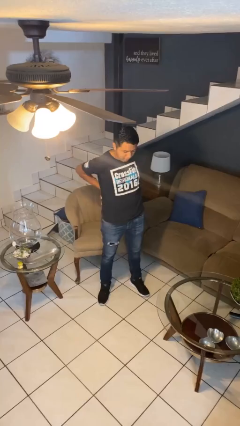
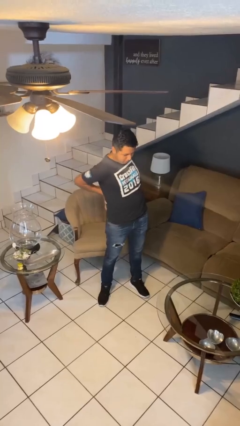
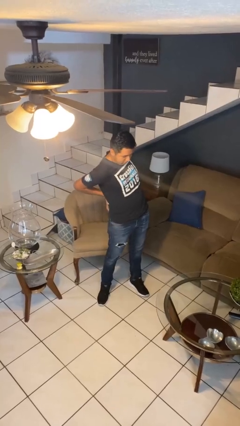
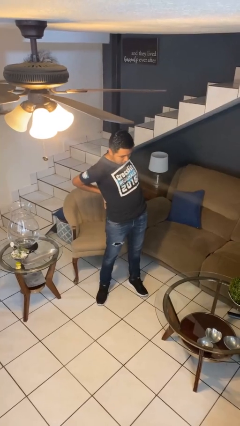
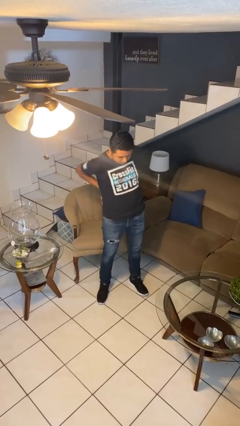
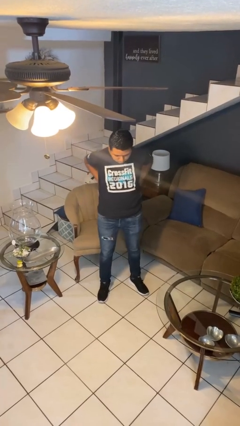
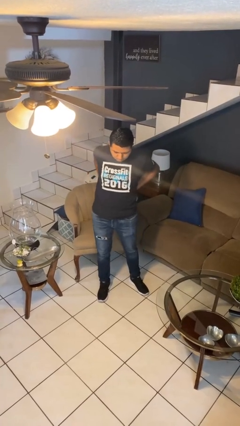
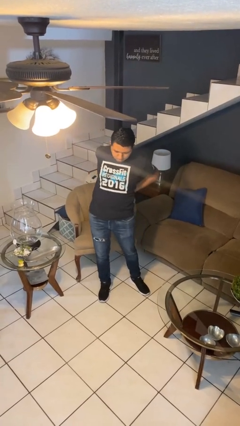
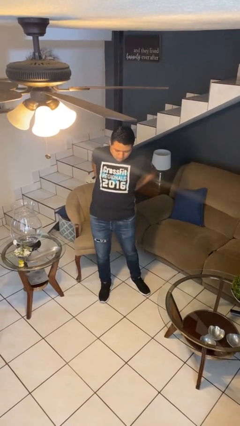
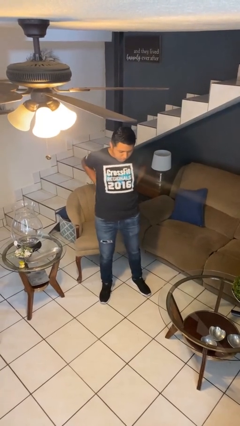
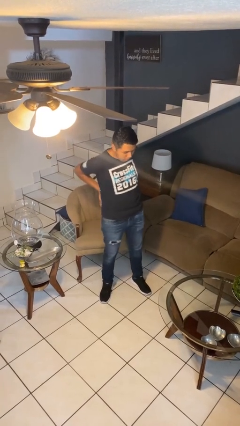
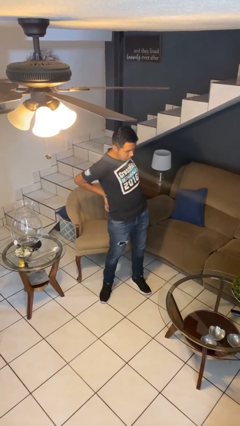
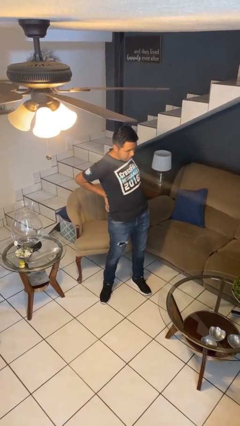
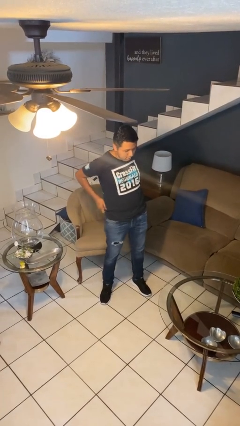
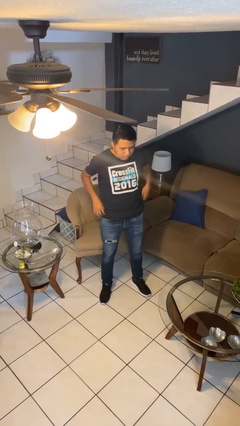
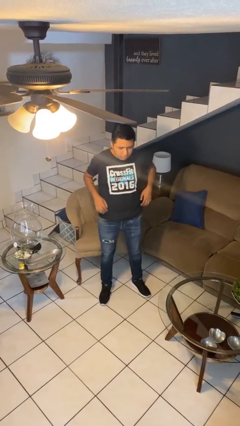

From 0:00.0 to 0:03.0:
person stretches back

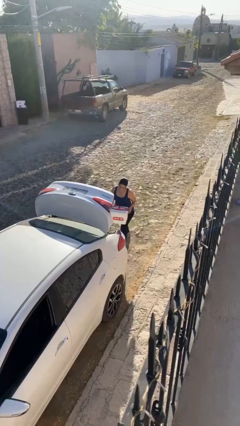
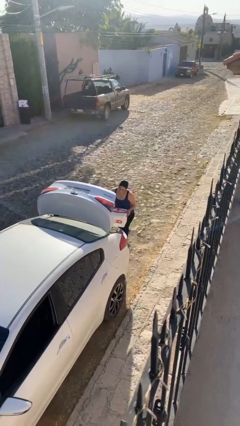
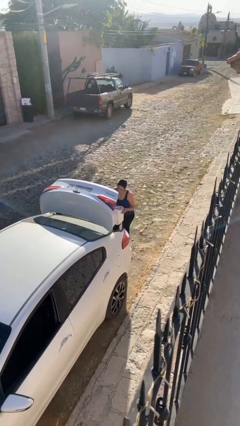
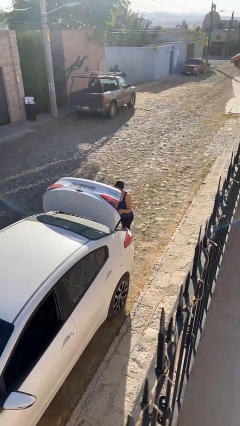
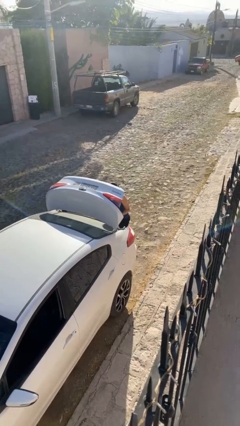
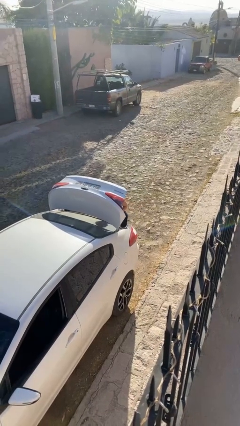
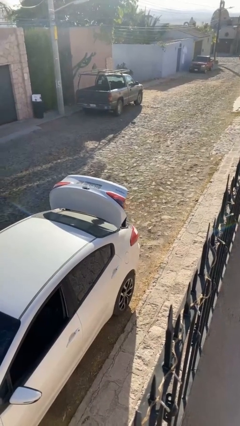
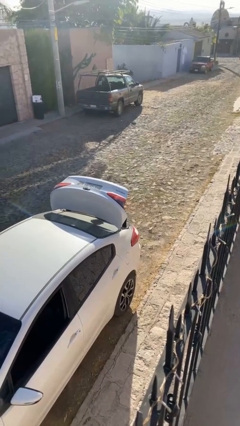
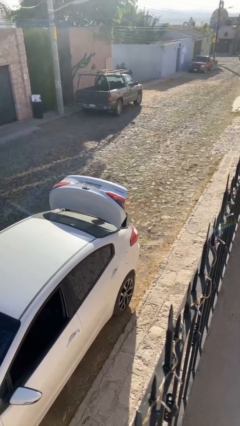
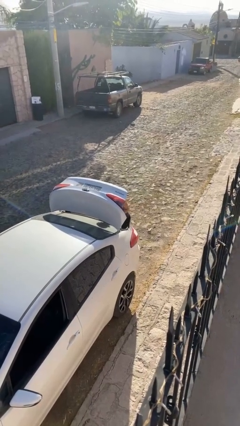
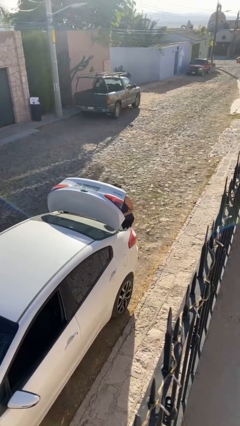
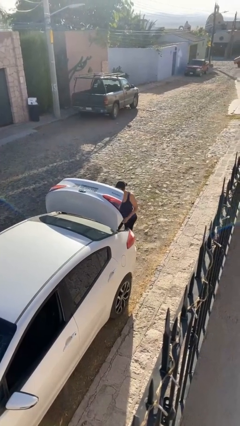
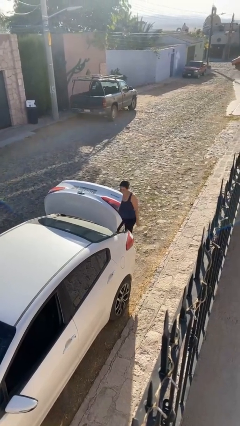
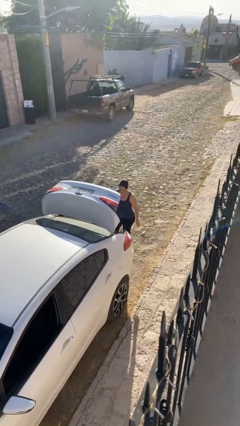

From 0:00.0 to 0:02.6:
person loads car

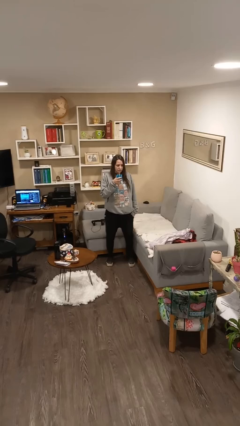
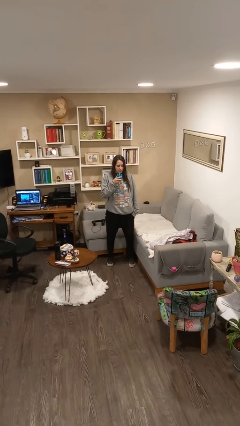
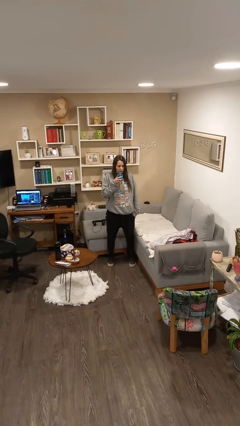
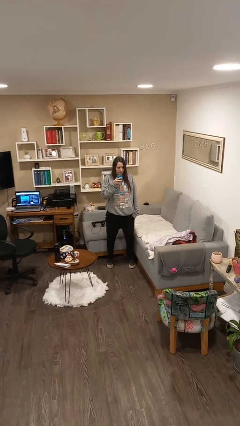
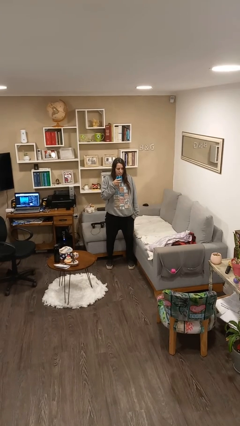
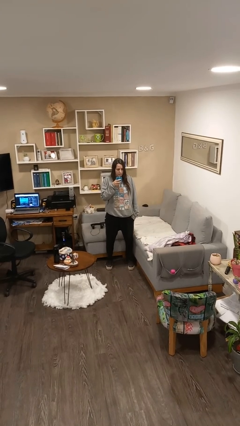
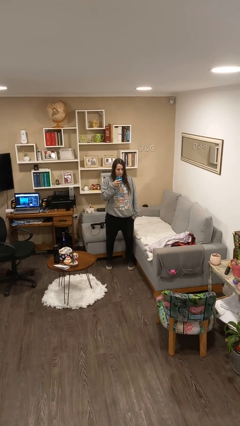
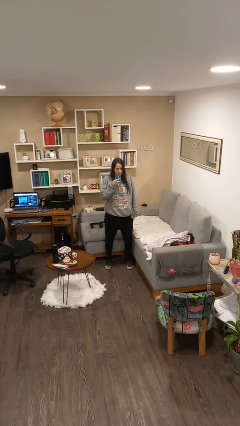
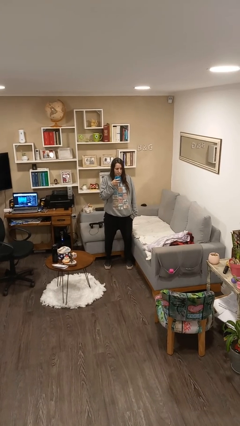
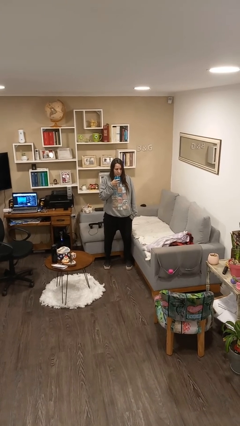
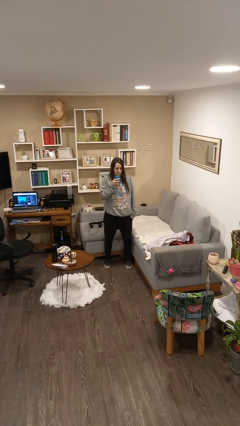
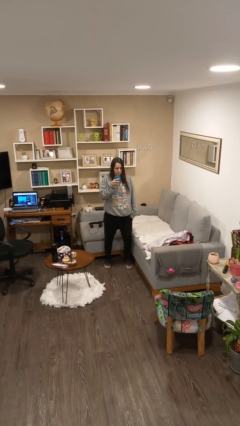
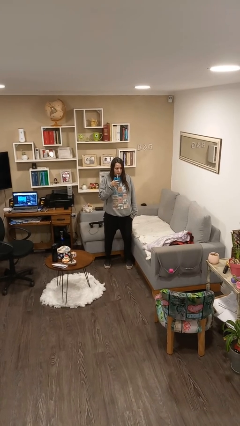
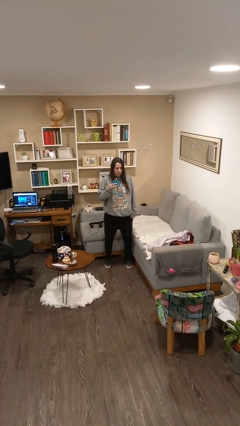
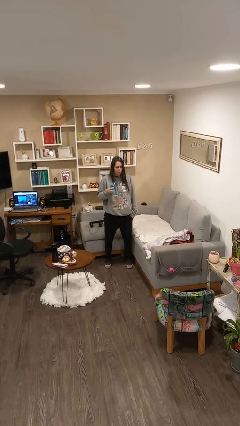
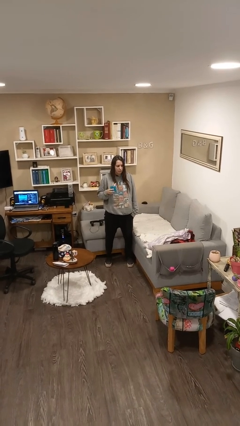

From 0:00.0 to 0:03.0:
person drinks from straw

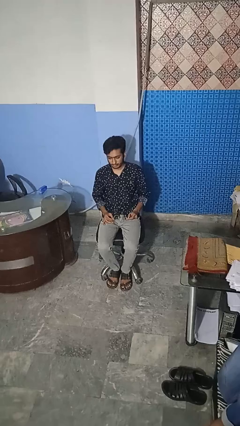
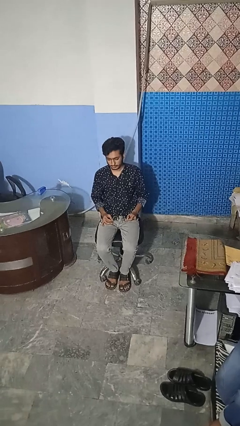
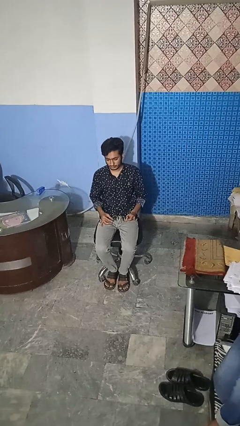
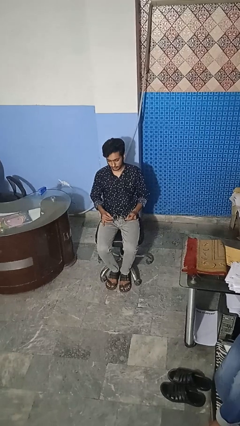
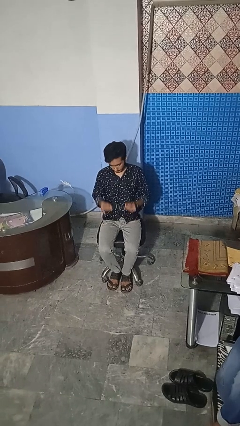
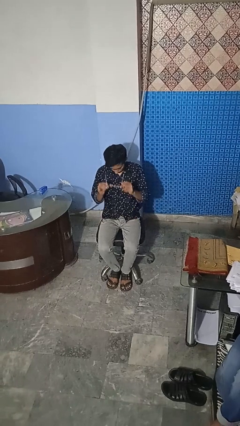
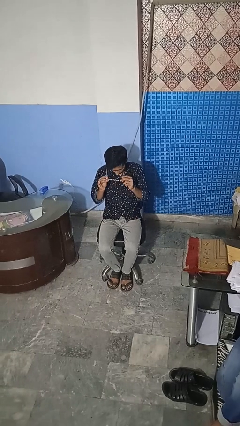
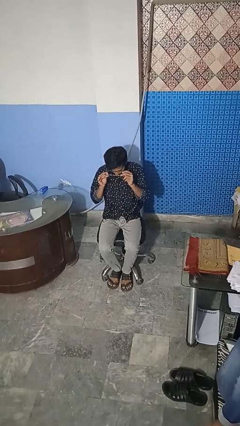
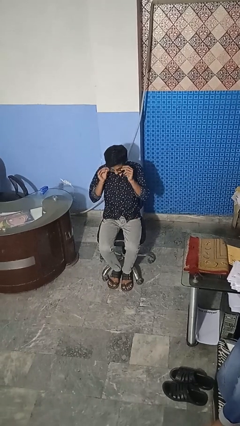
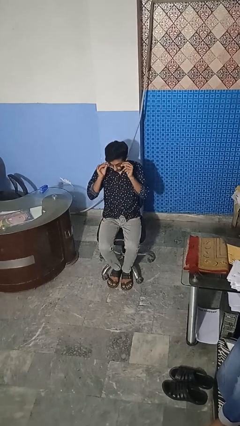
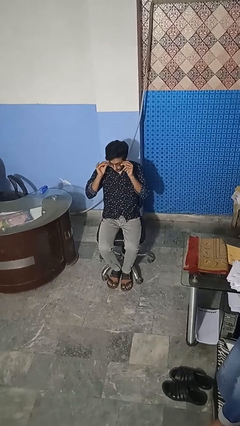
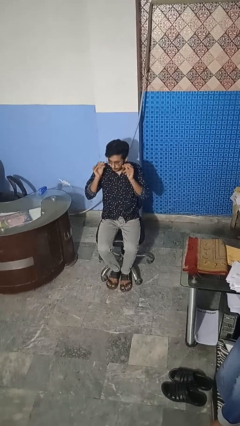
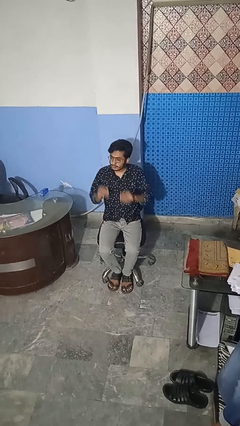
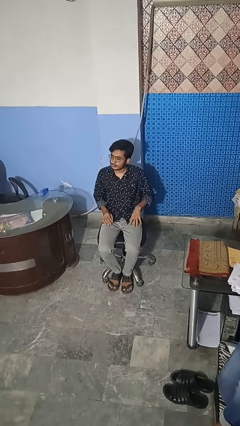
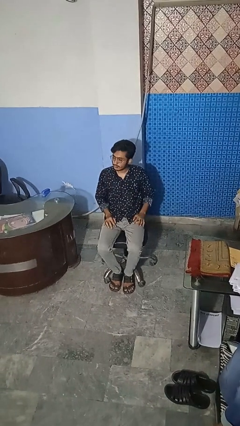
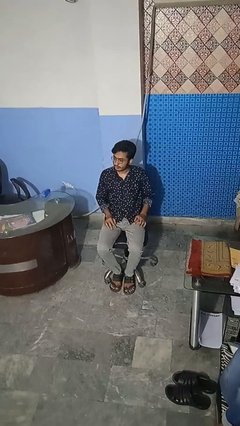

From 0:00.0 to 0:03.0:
person puts on glasses

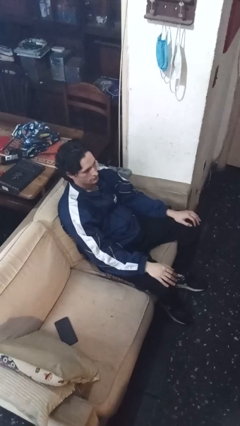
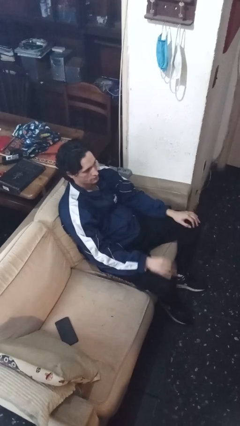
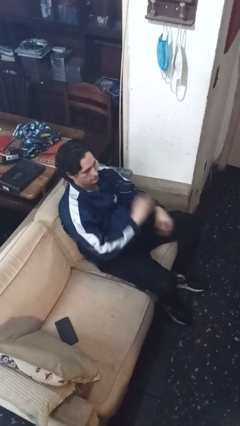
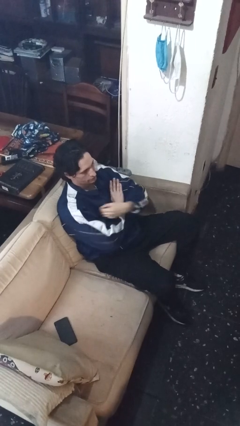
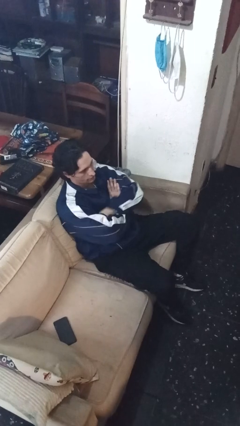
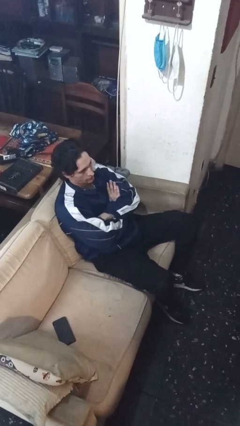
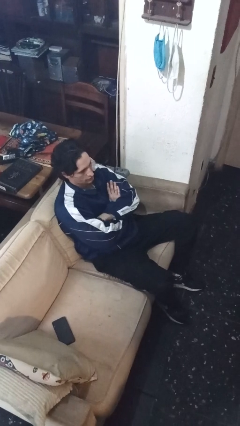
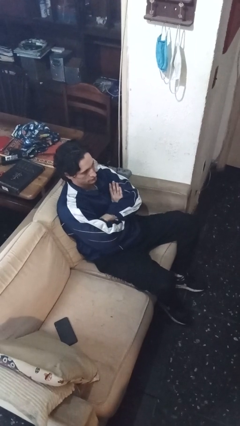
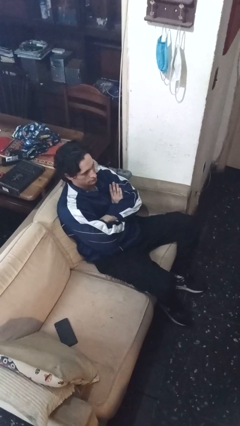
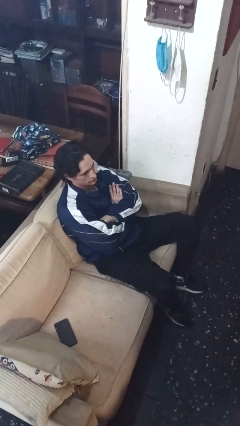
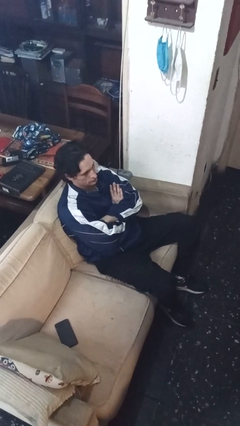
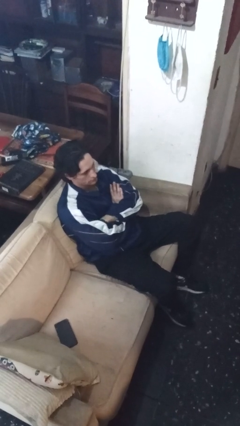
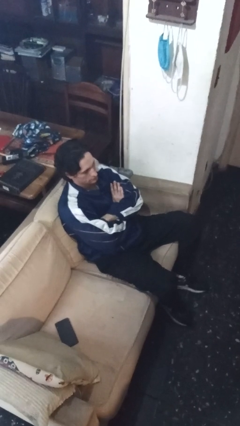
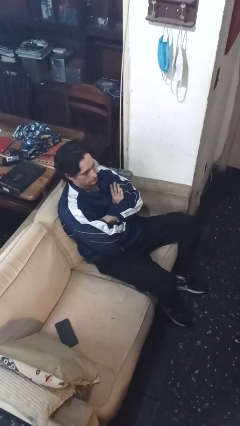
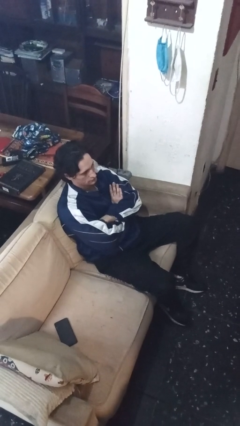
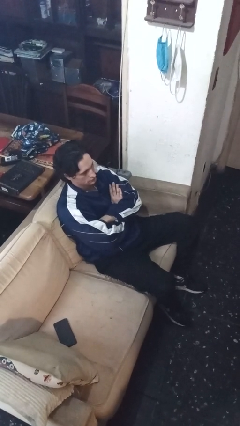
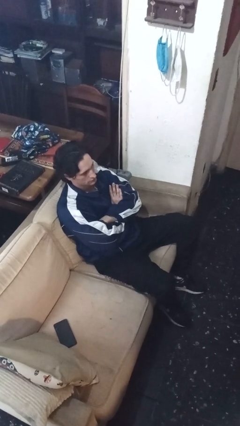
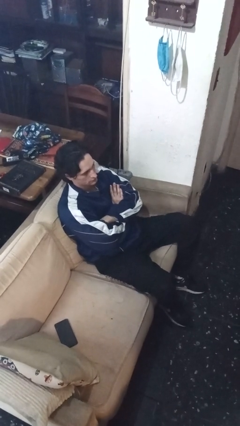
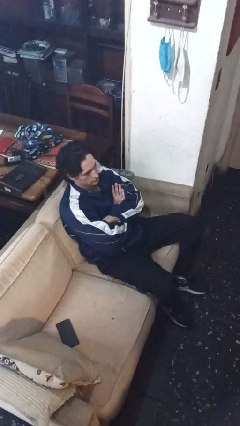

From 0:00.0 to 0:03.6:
person crosses arms

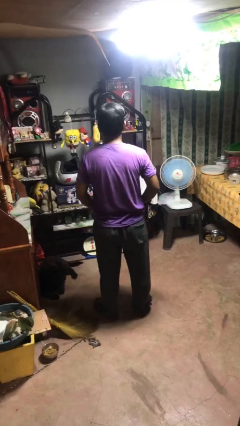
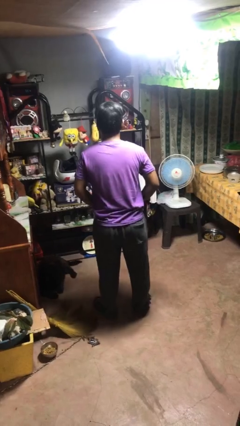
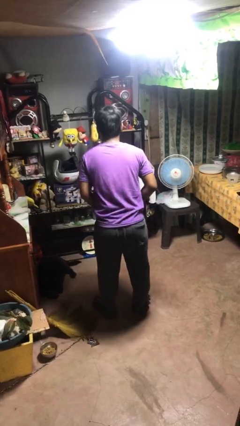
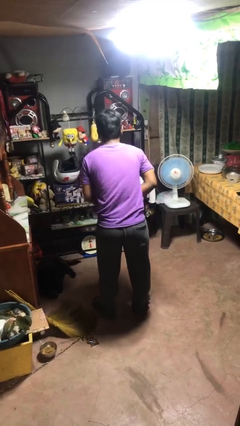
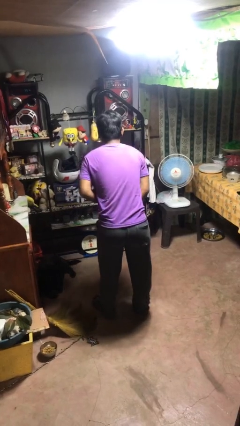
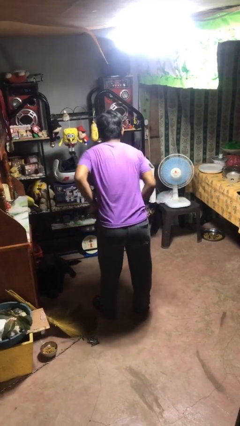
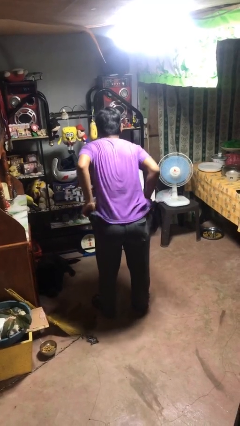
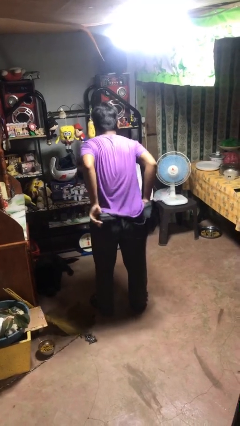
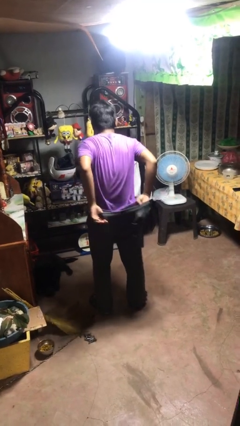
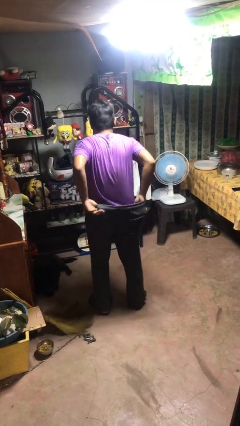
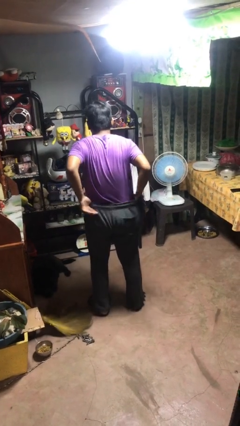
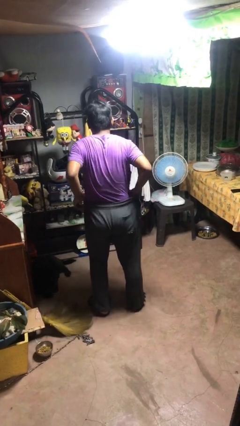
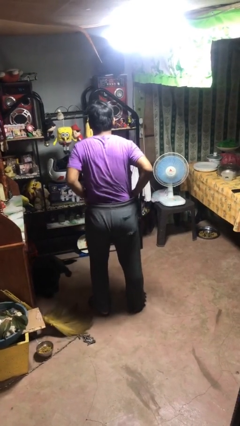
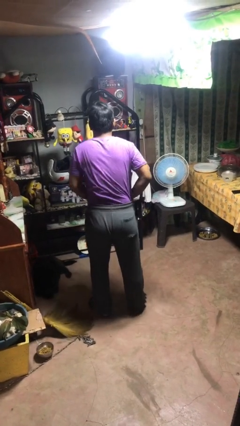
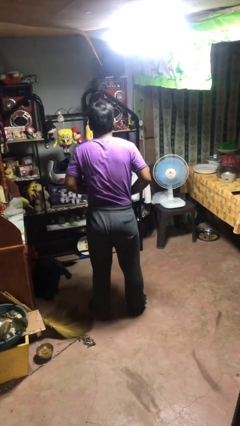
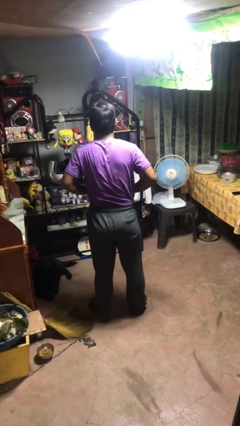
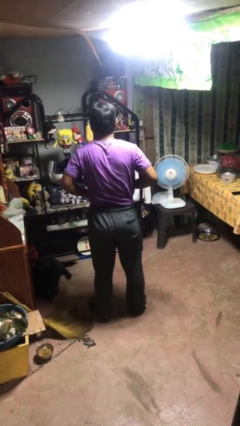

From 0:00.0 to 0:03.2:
person tucks in shirt
